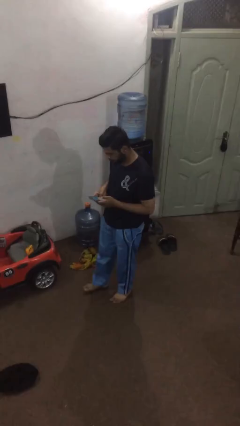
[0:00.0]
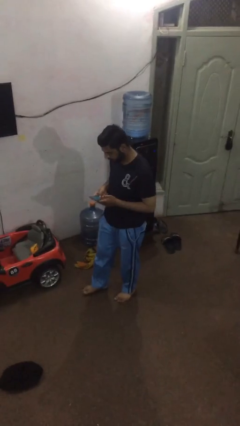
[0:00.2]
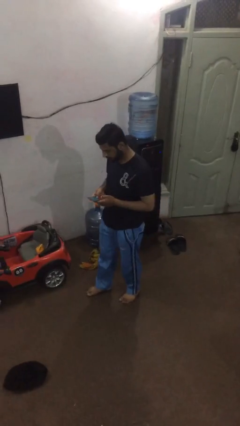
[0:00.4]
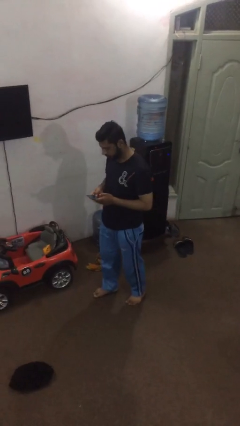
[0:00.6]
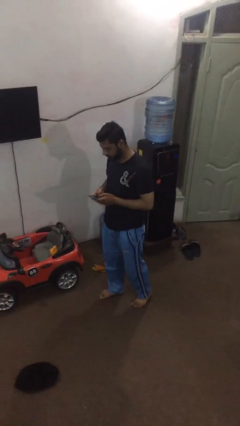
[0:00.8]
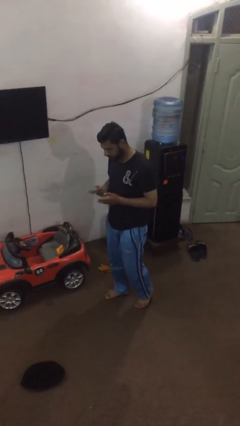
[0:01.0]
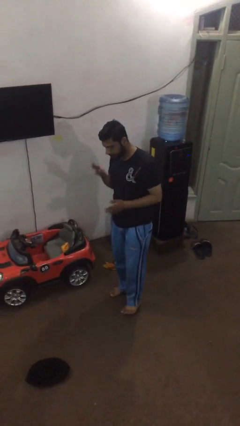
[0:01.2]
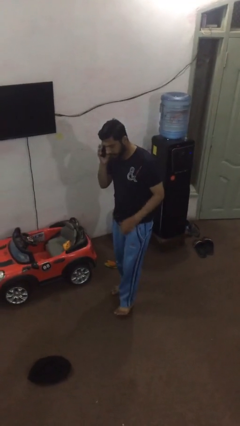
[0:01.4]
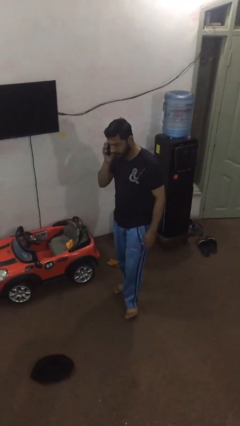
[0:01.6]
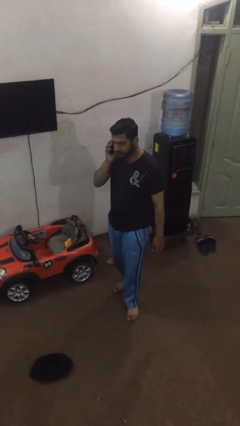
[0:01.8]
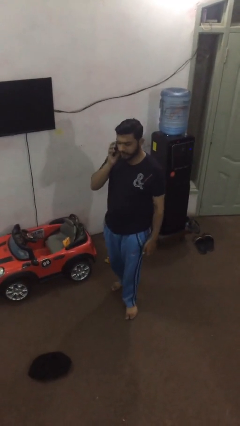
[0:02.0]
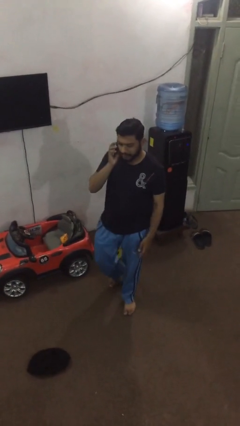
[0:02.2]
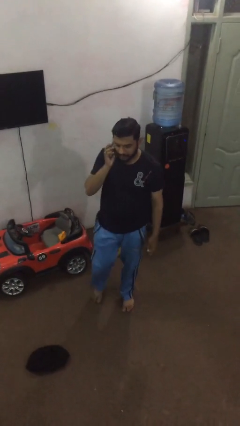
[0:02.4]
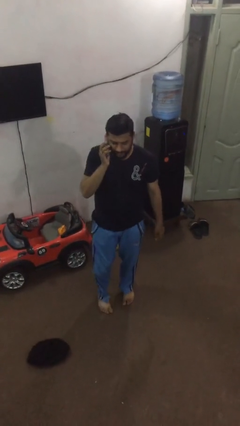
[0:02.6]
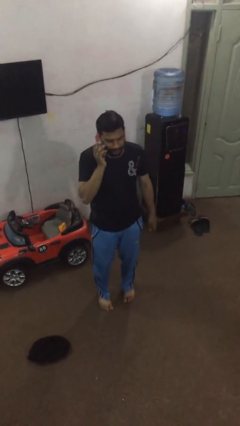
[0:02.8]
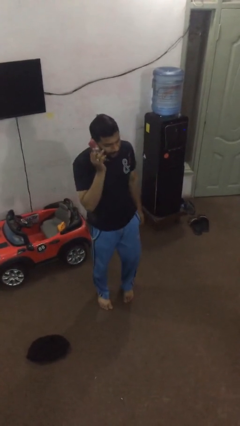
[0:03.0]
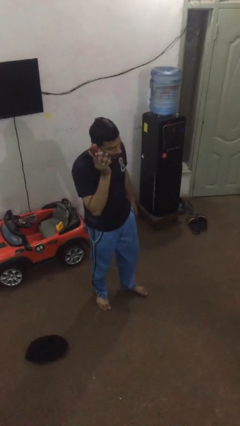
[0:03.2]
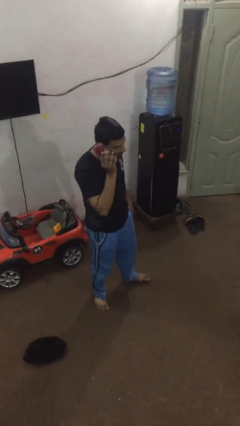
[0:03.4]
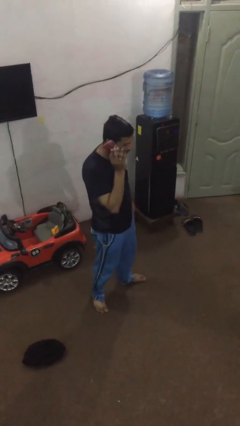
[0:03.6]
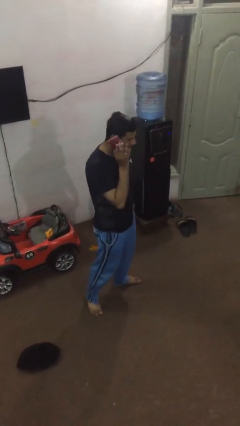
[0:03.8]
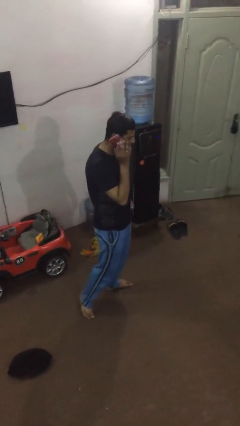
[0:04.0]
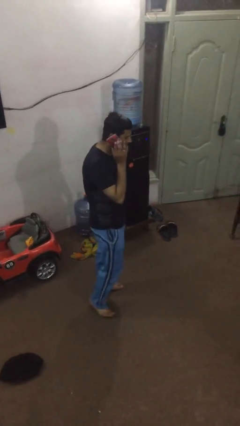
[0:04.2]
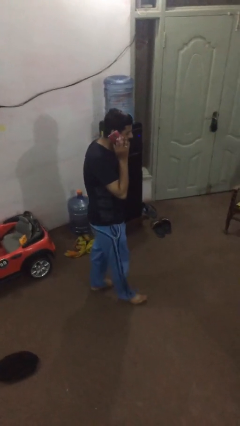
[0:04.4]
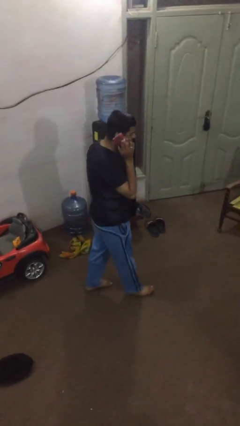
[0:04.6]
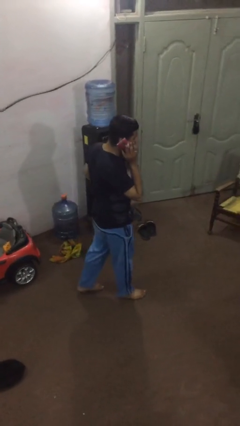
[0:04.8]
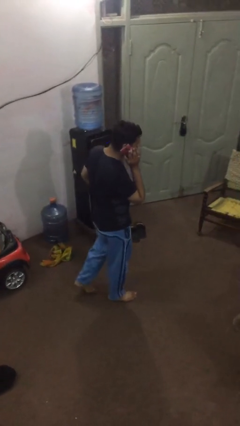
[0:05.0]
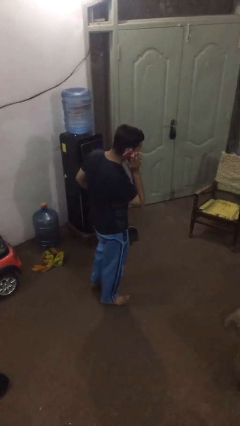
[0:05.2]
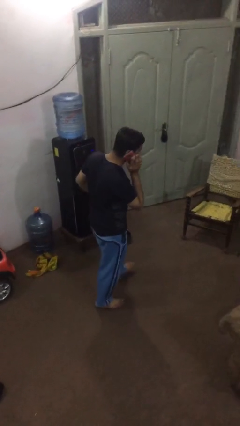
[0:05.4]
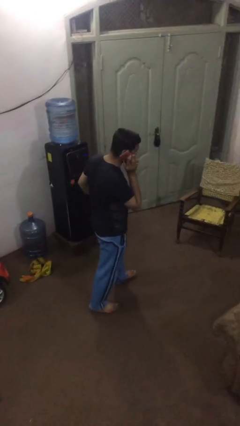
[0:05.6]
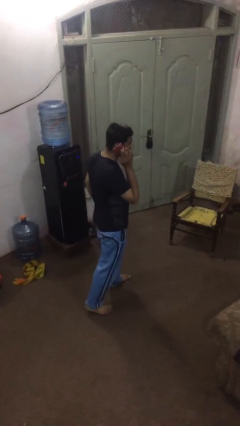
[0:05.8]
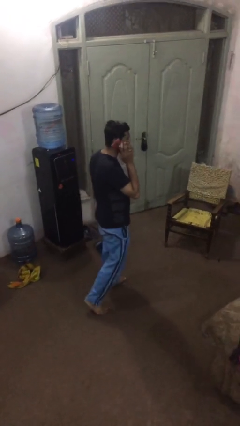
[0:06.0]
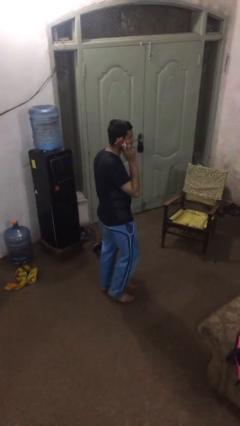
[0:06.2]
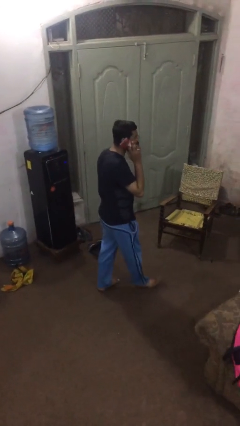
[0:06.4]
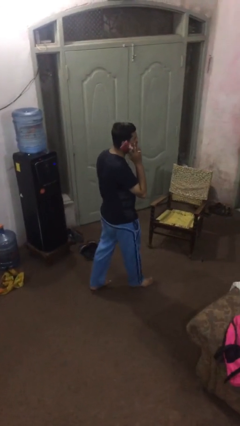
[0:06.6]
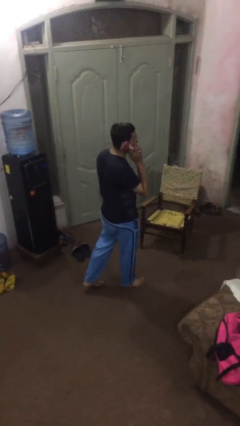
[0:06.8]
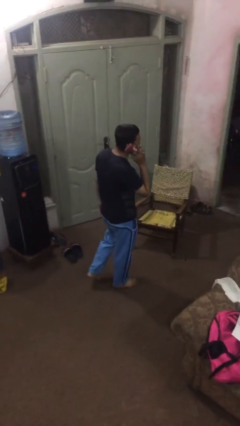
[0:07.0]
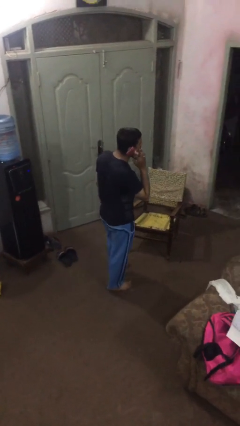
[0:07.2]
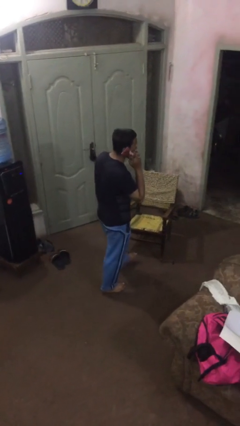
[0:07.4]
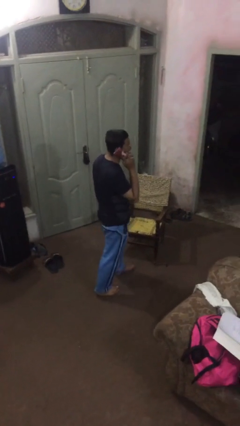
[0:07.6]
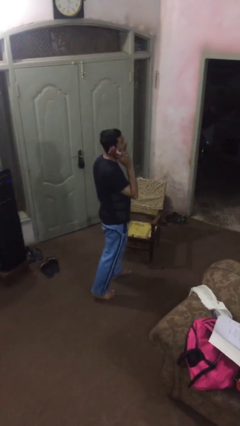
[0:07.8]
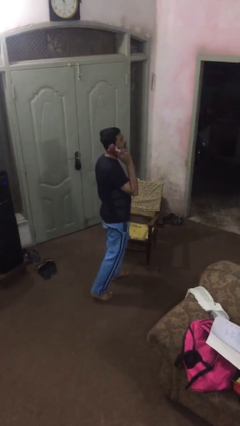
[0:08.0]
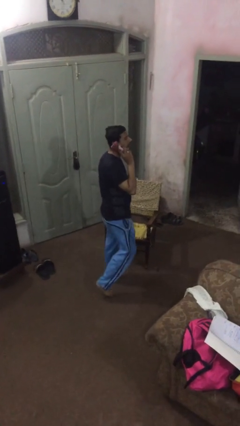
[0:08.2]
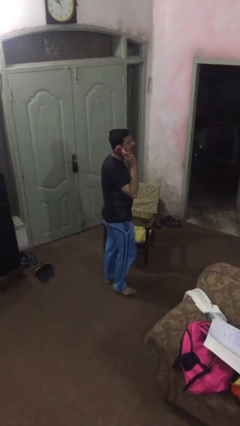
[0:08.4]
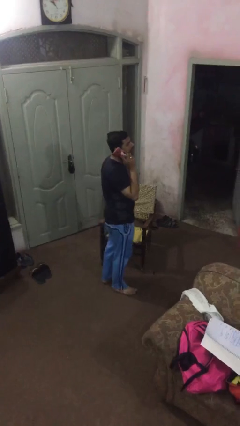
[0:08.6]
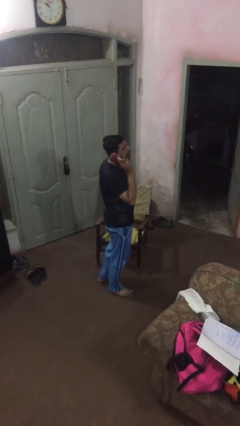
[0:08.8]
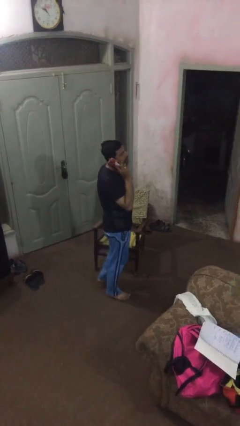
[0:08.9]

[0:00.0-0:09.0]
person talks on phone

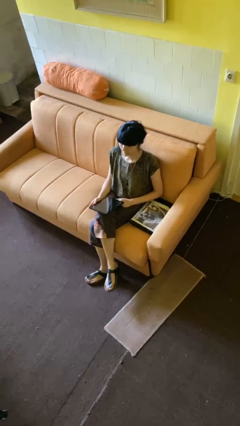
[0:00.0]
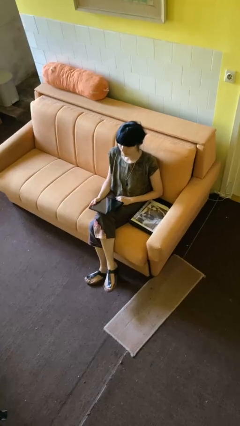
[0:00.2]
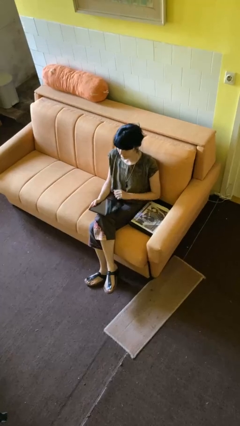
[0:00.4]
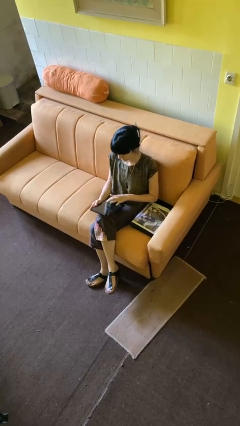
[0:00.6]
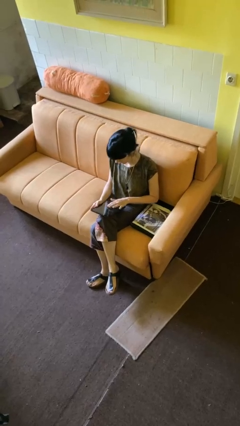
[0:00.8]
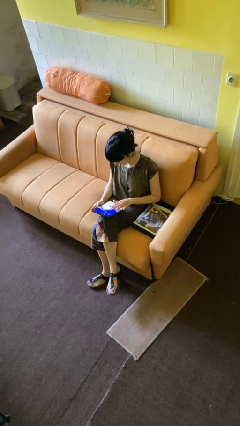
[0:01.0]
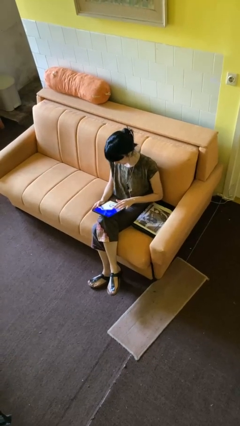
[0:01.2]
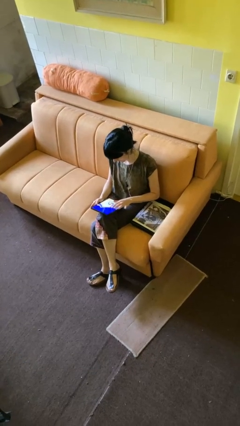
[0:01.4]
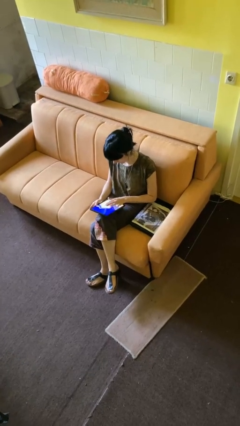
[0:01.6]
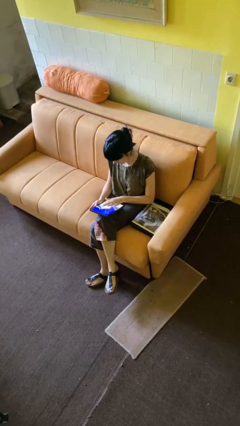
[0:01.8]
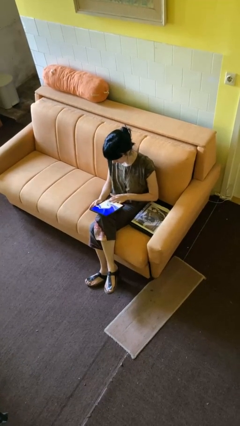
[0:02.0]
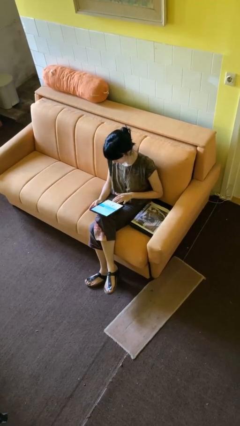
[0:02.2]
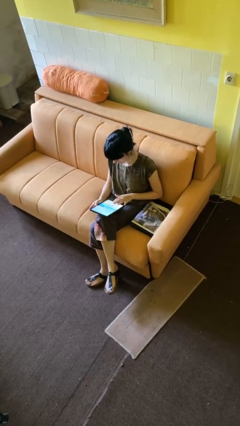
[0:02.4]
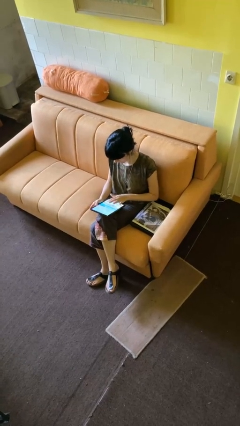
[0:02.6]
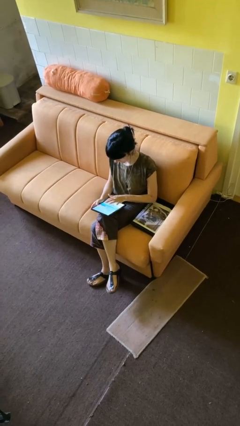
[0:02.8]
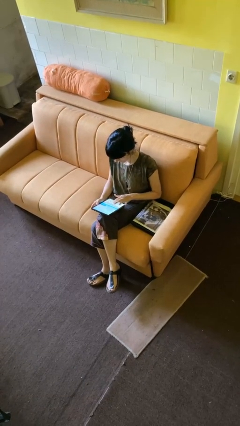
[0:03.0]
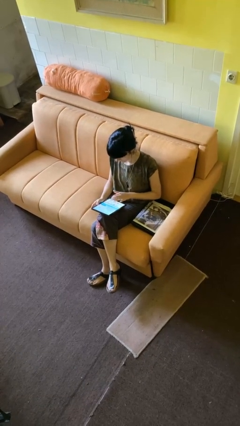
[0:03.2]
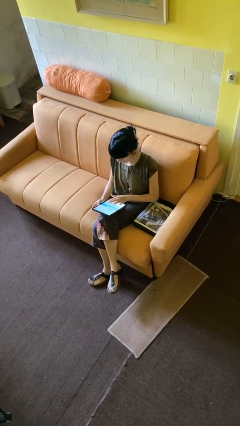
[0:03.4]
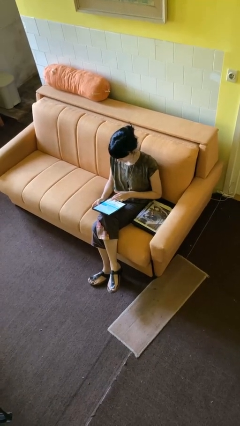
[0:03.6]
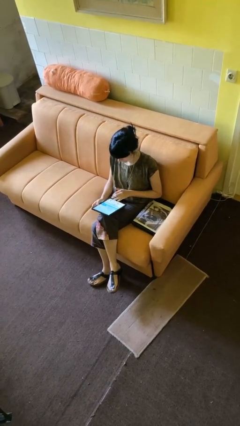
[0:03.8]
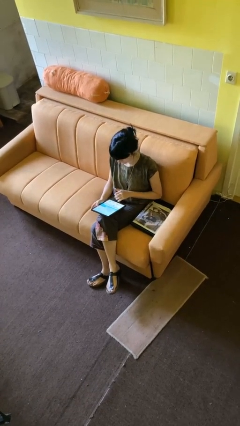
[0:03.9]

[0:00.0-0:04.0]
person interacts with tablet

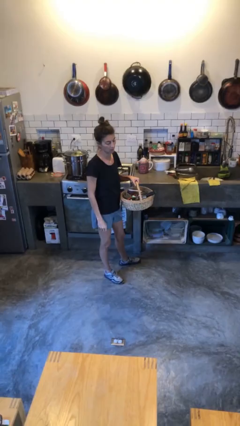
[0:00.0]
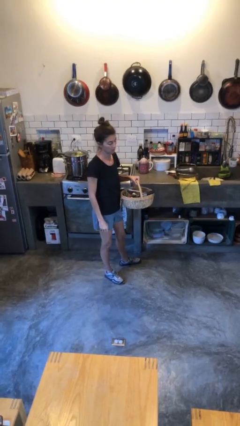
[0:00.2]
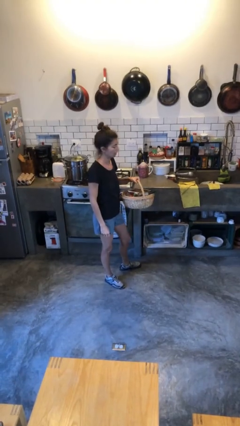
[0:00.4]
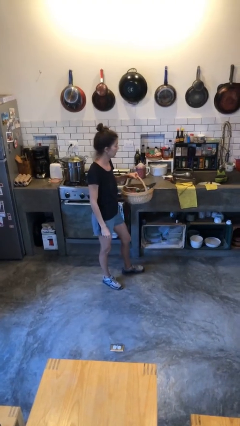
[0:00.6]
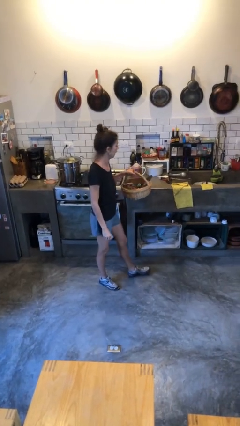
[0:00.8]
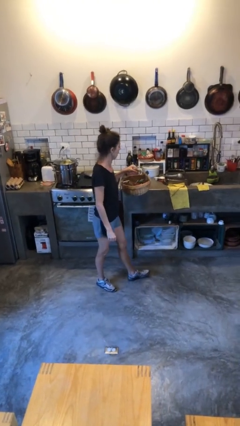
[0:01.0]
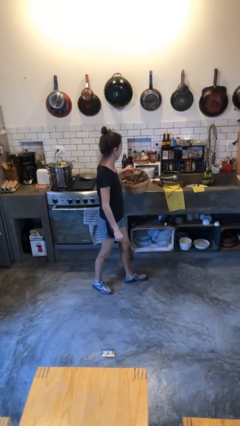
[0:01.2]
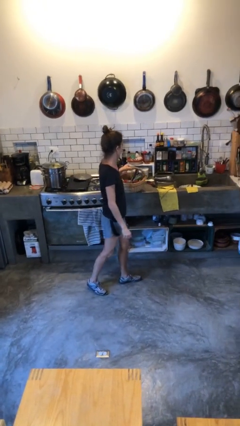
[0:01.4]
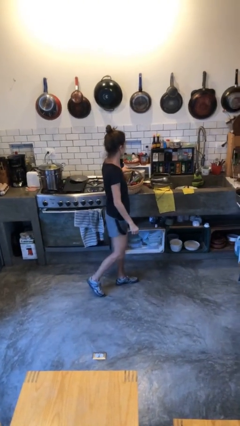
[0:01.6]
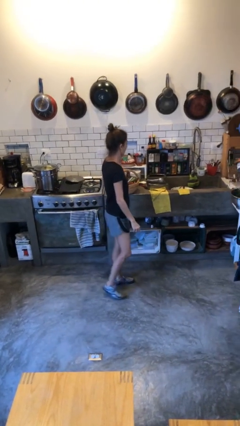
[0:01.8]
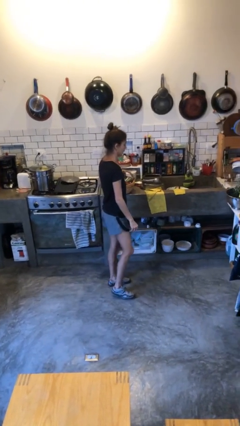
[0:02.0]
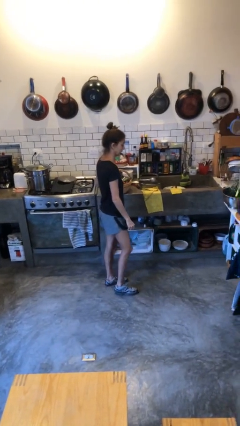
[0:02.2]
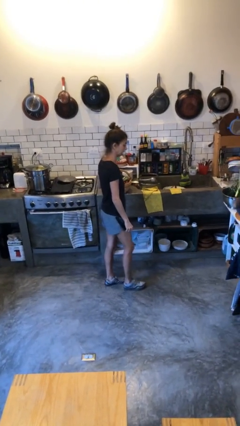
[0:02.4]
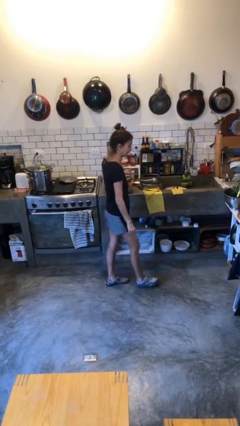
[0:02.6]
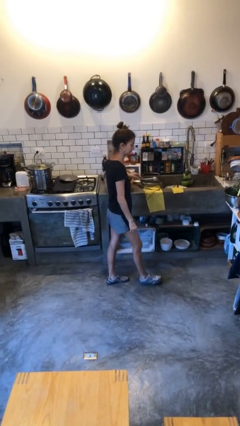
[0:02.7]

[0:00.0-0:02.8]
person puts down object on countertop

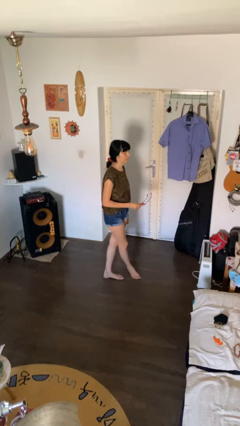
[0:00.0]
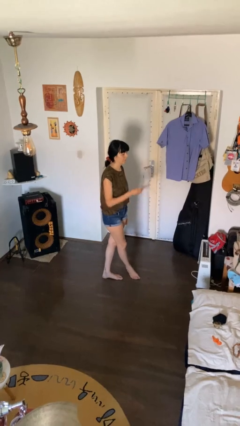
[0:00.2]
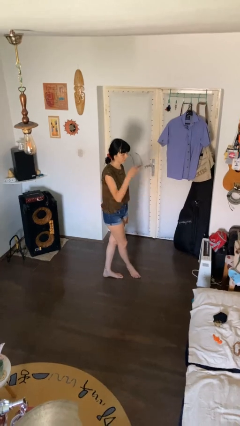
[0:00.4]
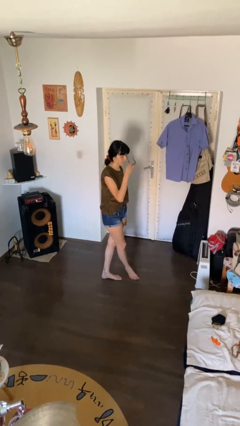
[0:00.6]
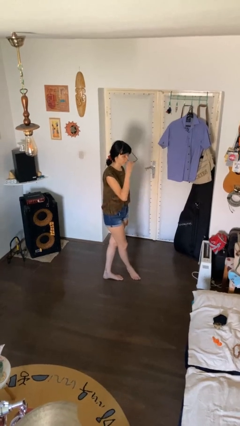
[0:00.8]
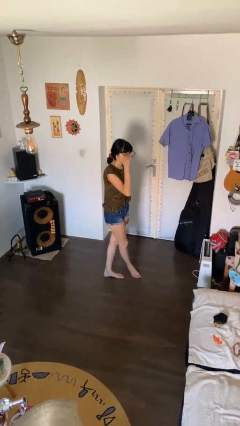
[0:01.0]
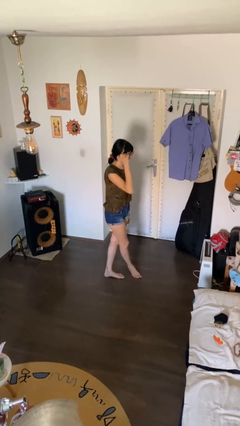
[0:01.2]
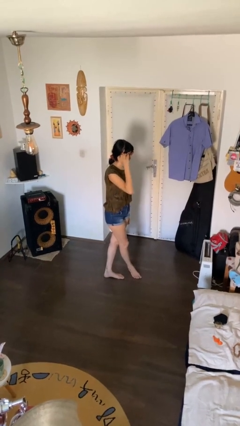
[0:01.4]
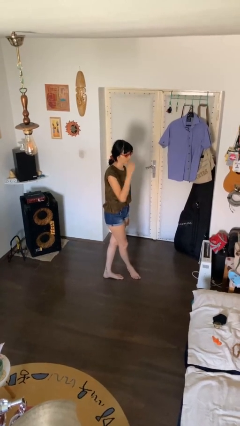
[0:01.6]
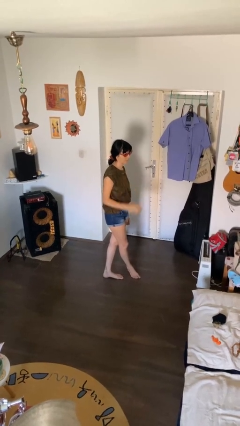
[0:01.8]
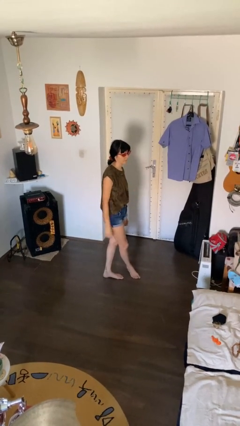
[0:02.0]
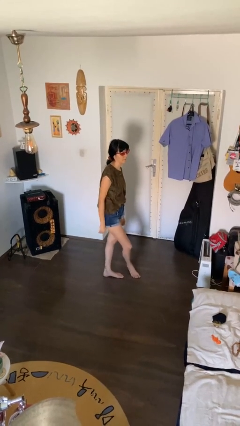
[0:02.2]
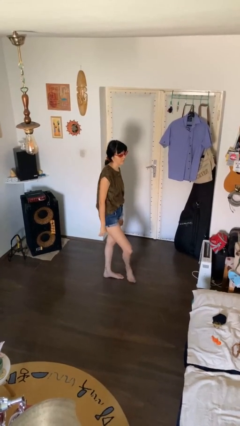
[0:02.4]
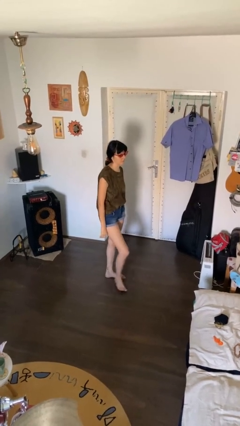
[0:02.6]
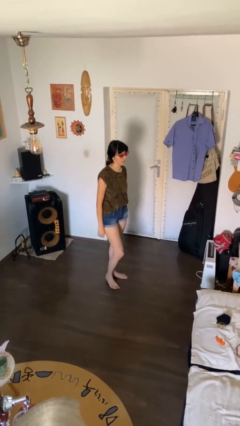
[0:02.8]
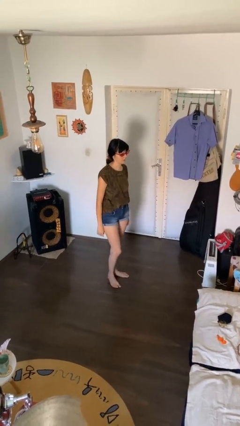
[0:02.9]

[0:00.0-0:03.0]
person puts on sunglasses
